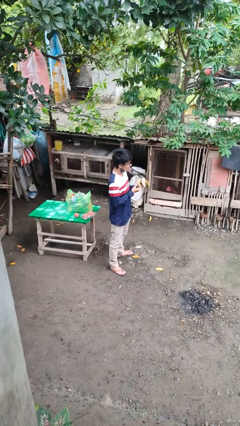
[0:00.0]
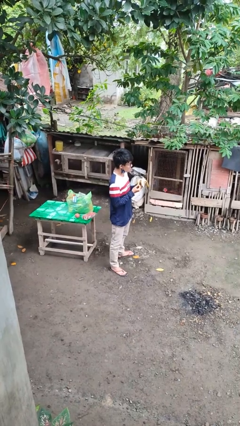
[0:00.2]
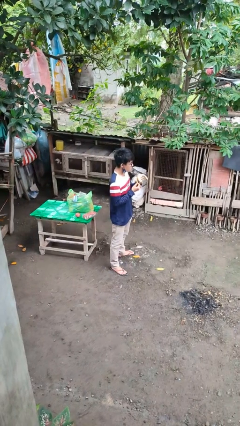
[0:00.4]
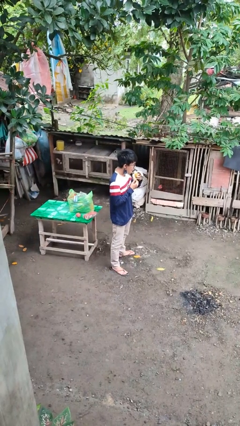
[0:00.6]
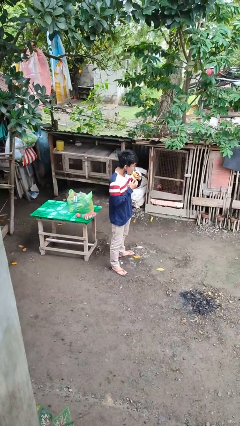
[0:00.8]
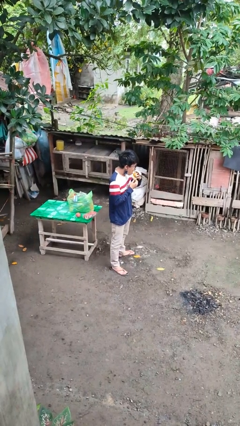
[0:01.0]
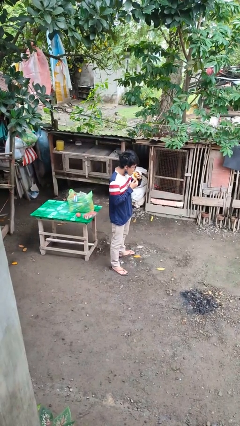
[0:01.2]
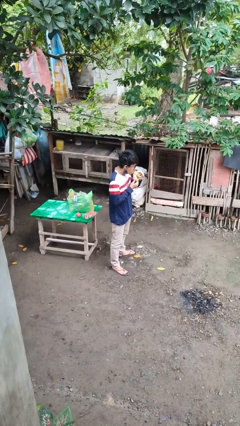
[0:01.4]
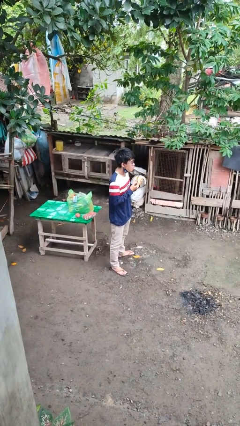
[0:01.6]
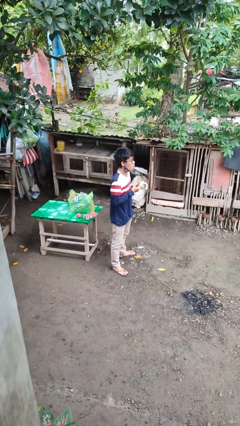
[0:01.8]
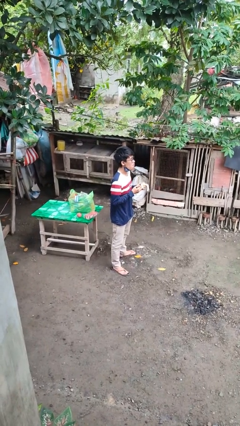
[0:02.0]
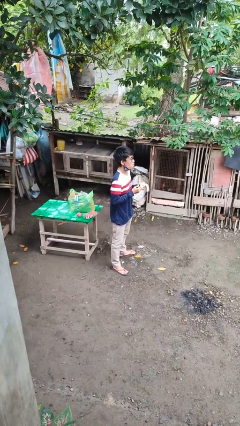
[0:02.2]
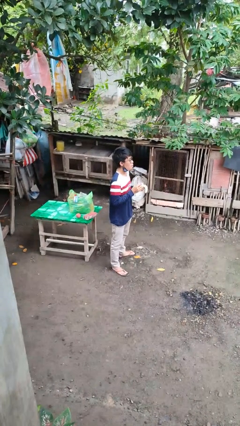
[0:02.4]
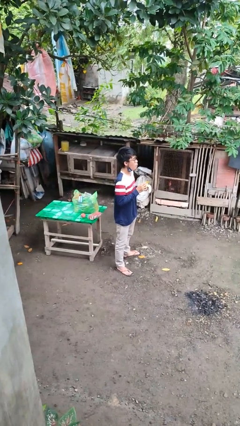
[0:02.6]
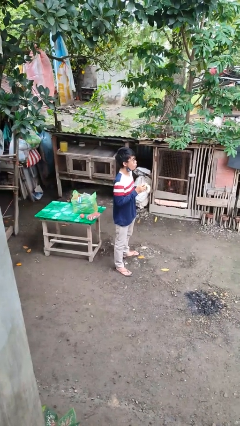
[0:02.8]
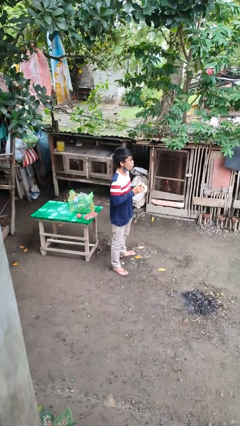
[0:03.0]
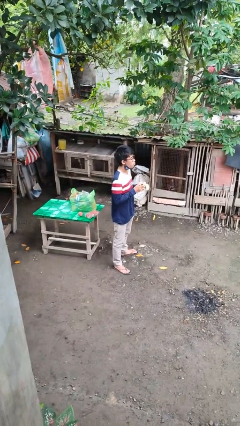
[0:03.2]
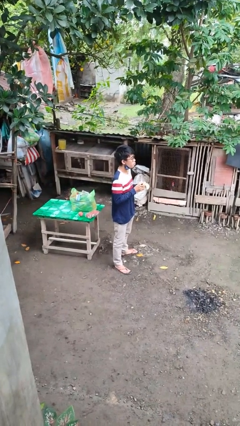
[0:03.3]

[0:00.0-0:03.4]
person eats banana

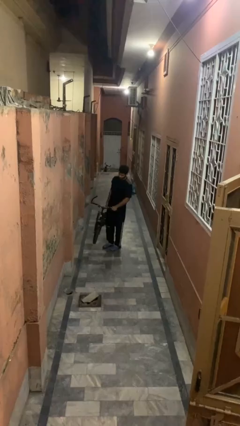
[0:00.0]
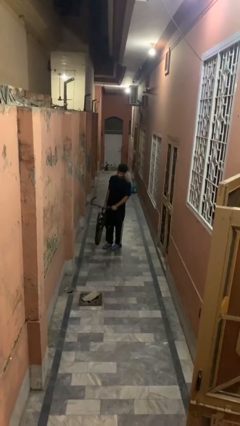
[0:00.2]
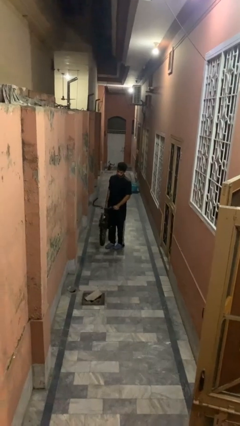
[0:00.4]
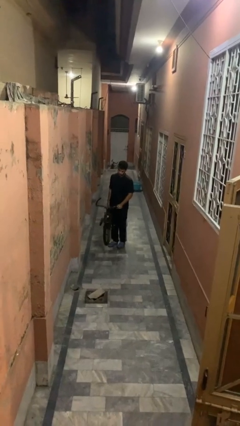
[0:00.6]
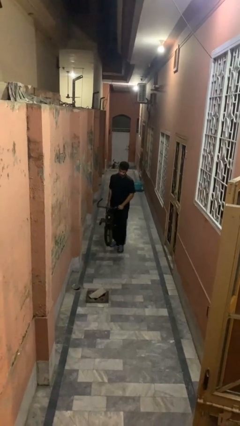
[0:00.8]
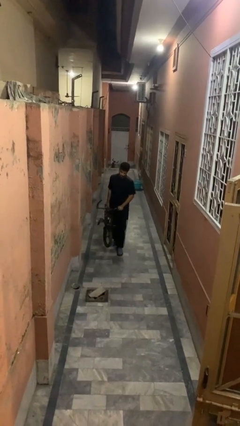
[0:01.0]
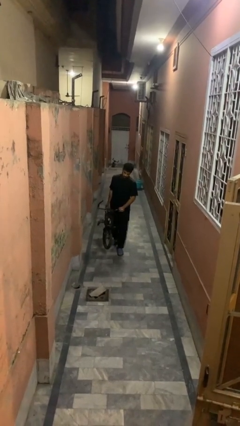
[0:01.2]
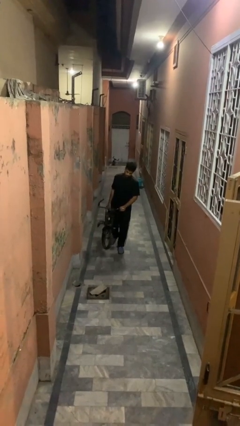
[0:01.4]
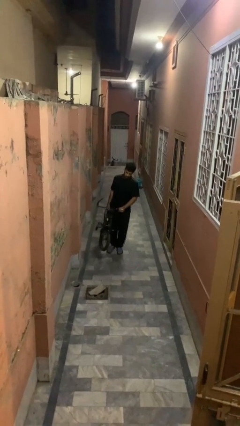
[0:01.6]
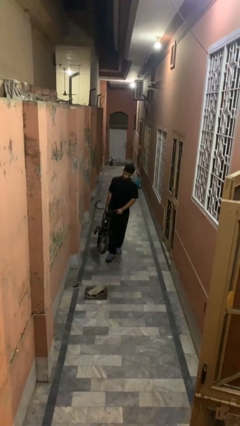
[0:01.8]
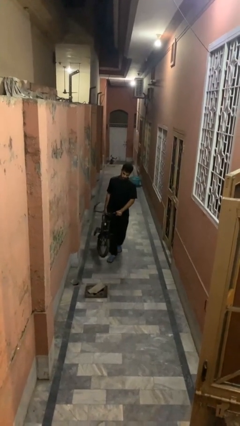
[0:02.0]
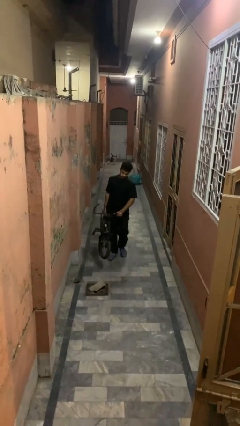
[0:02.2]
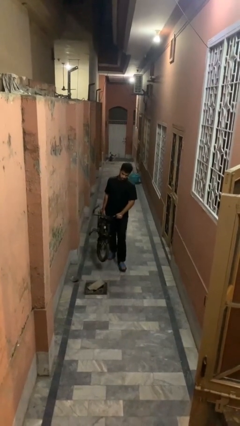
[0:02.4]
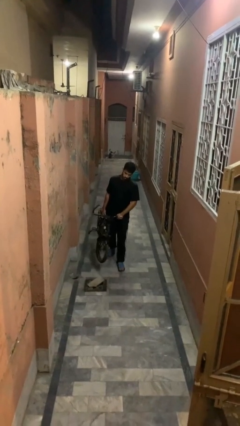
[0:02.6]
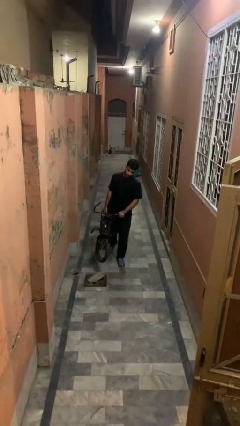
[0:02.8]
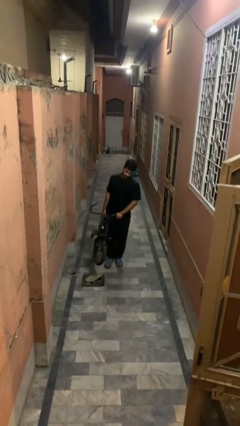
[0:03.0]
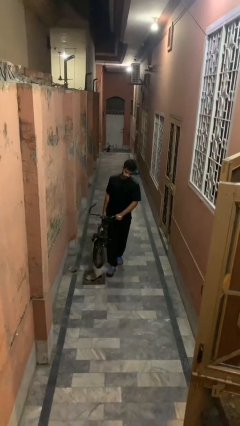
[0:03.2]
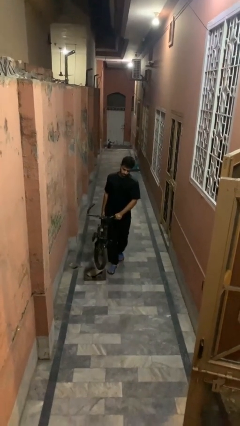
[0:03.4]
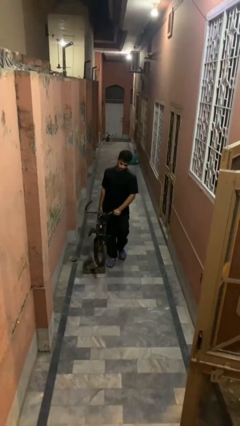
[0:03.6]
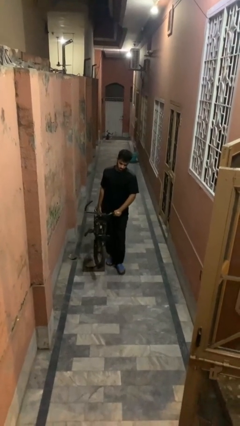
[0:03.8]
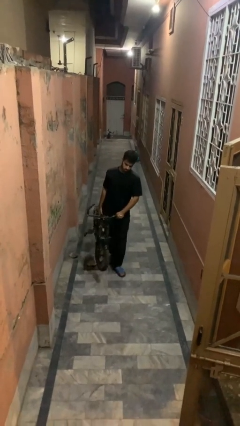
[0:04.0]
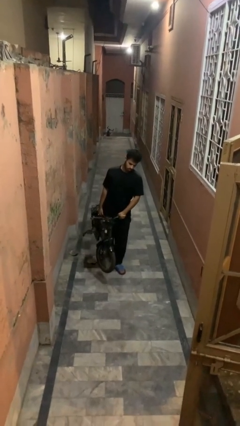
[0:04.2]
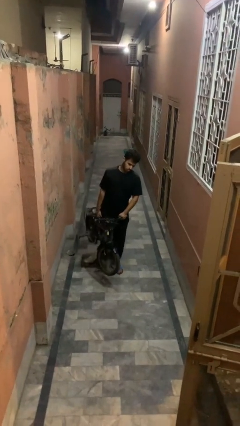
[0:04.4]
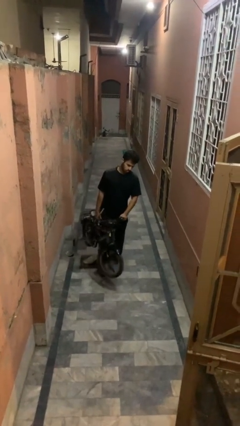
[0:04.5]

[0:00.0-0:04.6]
person carries bicycle

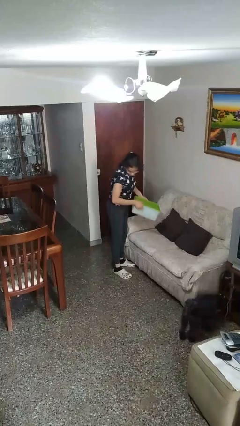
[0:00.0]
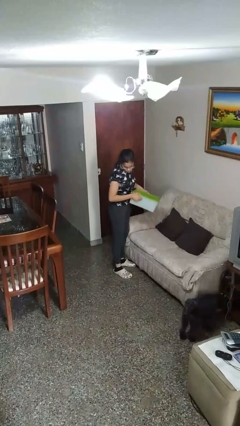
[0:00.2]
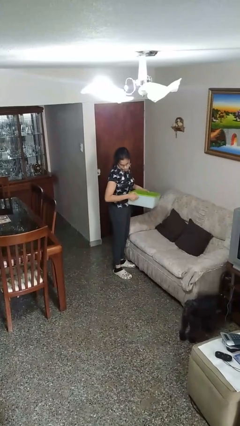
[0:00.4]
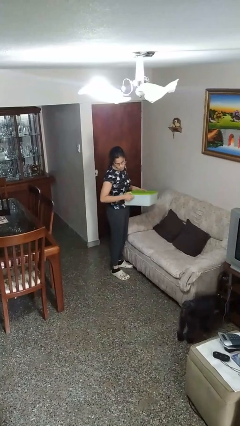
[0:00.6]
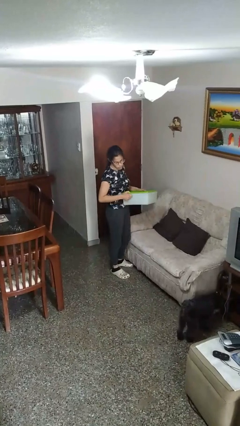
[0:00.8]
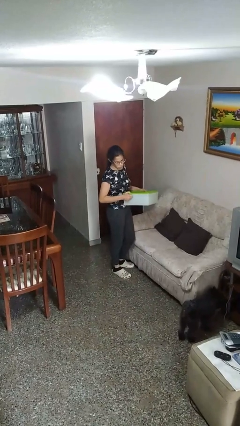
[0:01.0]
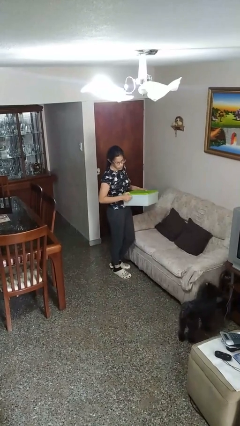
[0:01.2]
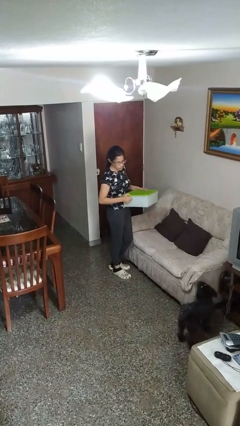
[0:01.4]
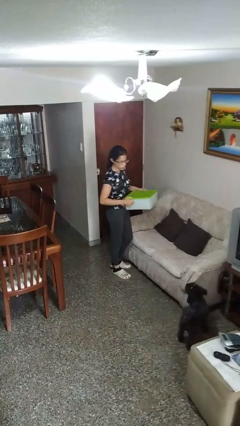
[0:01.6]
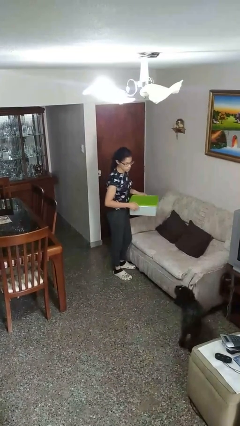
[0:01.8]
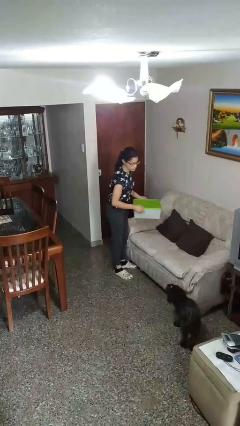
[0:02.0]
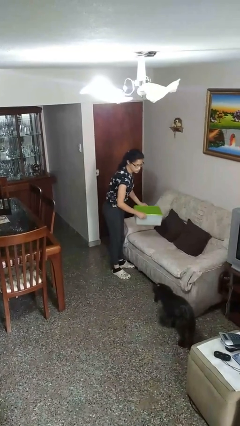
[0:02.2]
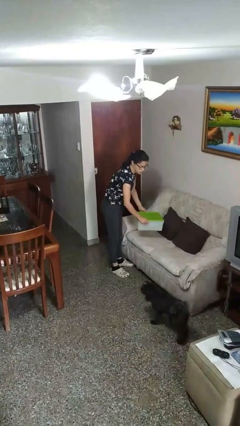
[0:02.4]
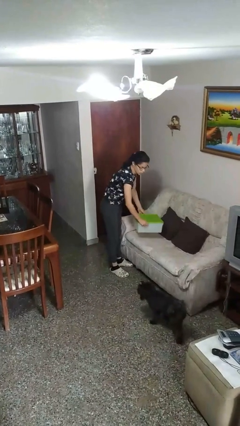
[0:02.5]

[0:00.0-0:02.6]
person picks up object from couch

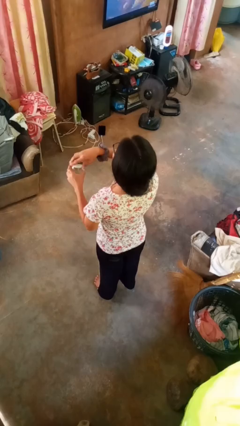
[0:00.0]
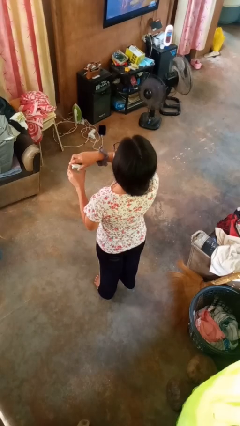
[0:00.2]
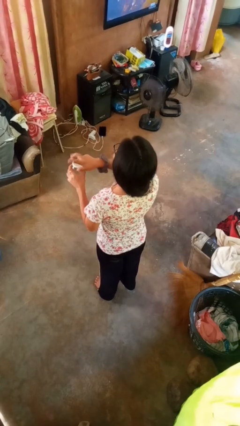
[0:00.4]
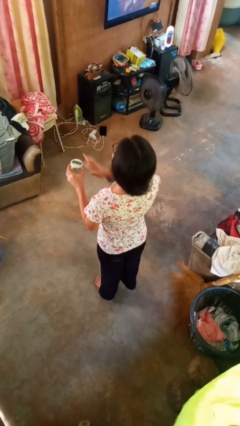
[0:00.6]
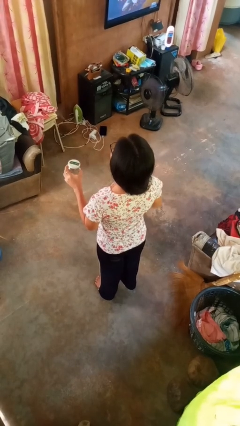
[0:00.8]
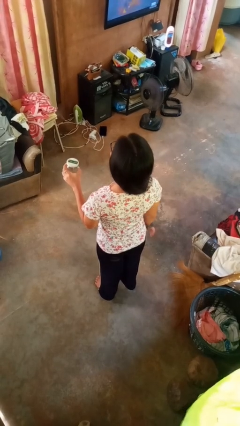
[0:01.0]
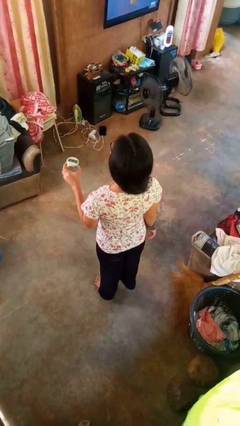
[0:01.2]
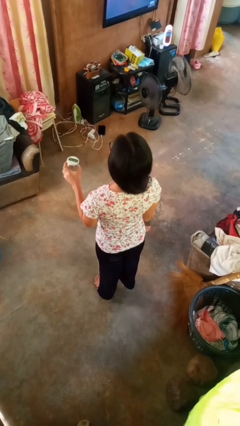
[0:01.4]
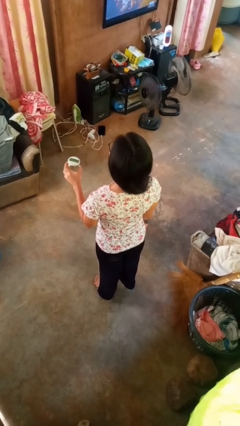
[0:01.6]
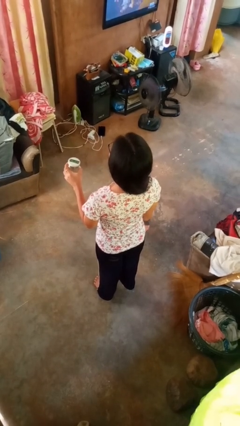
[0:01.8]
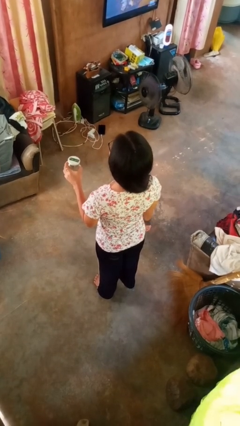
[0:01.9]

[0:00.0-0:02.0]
person closes jar

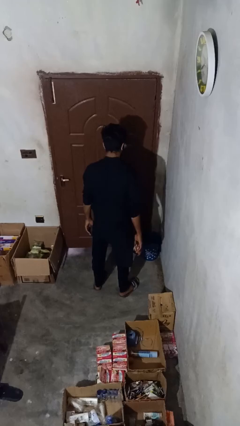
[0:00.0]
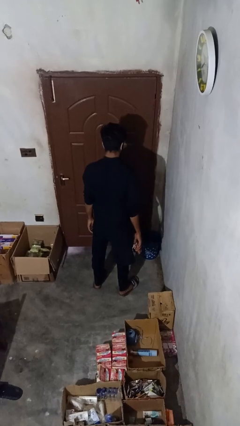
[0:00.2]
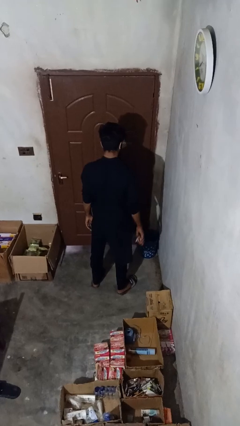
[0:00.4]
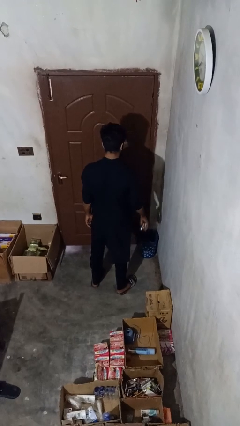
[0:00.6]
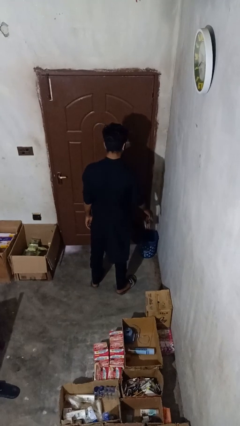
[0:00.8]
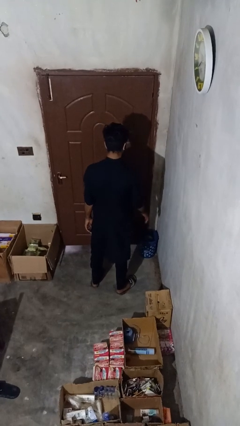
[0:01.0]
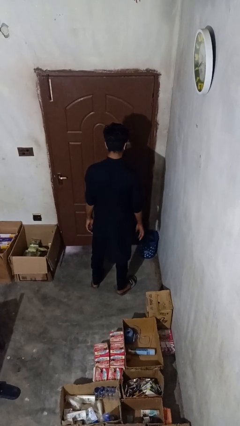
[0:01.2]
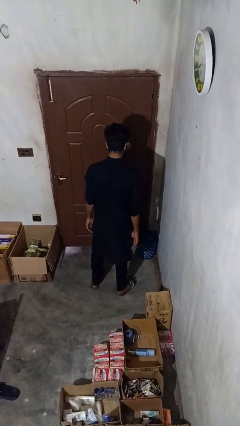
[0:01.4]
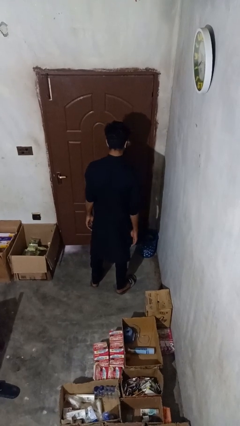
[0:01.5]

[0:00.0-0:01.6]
person discards trash

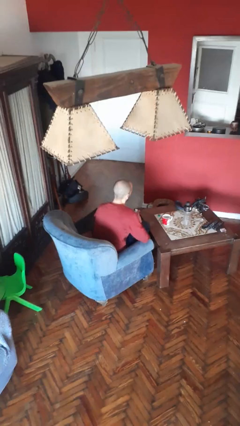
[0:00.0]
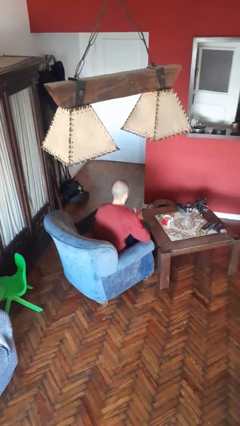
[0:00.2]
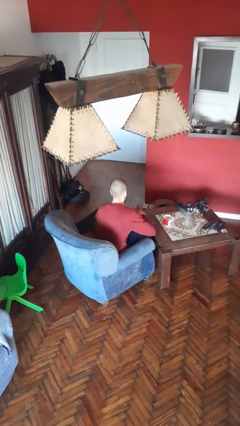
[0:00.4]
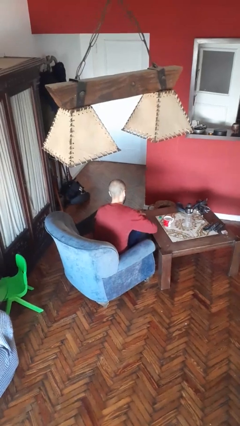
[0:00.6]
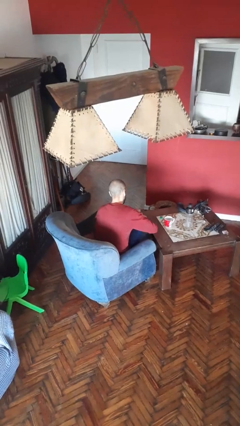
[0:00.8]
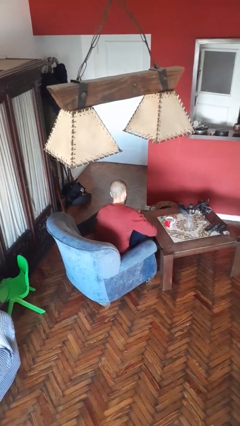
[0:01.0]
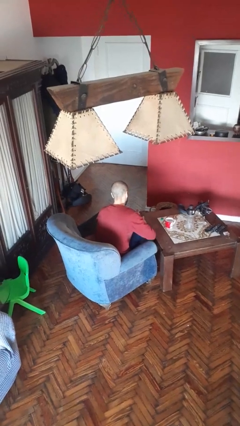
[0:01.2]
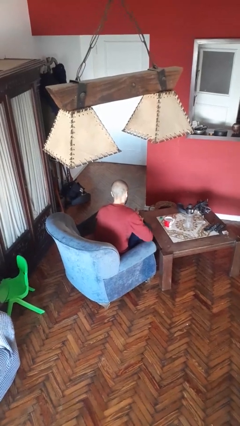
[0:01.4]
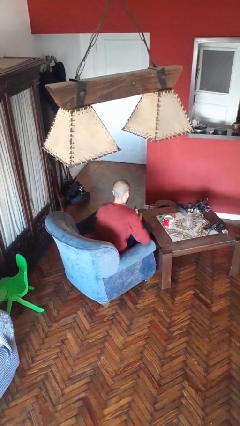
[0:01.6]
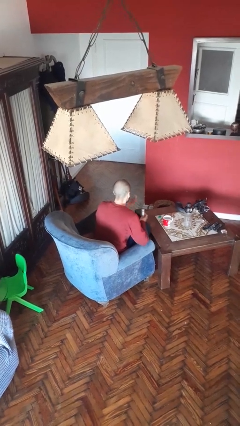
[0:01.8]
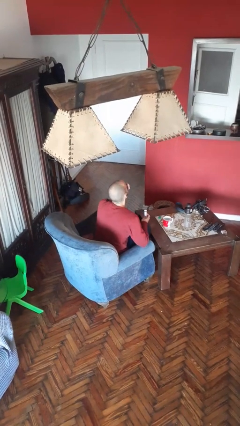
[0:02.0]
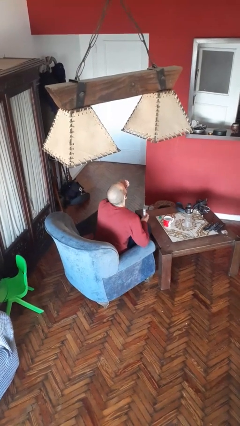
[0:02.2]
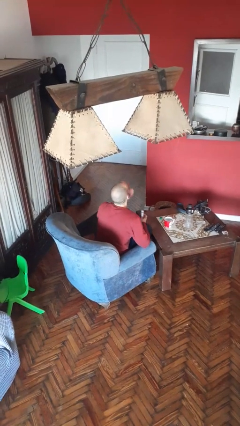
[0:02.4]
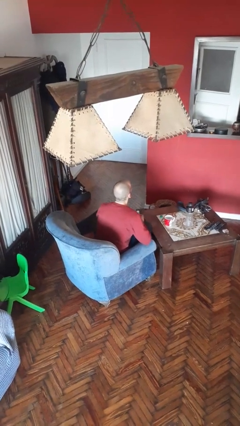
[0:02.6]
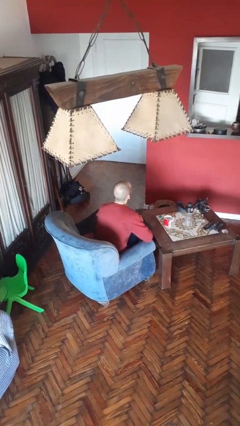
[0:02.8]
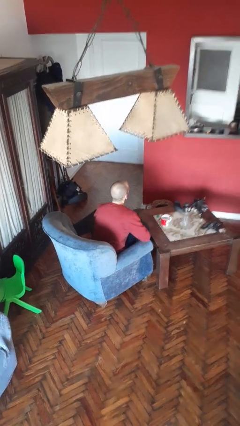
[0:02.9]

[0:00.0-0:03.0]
person takes medicine pills
